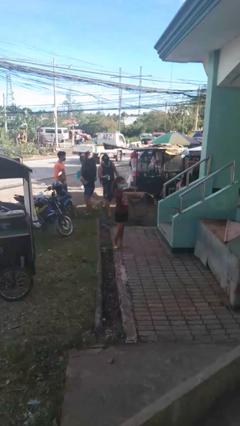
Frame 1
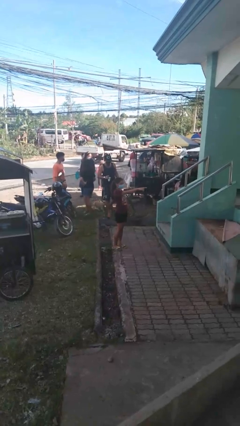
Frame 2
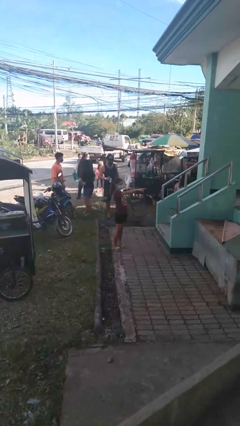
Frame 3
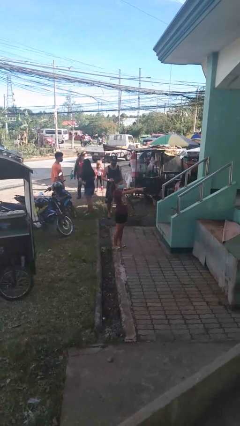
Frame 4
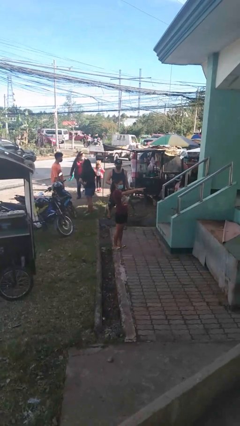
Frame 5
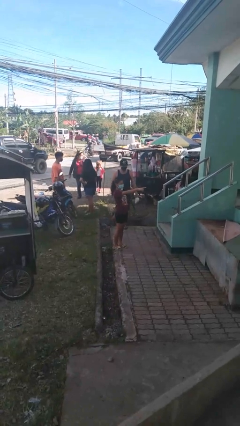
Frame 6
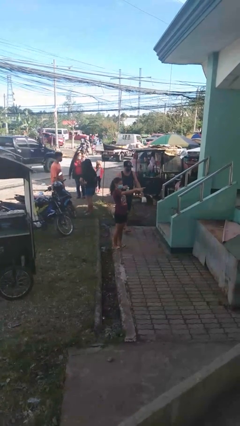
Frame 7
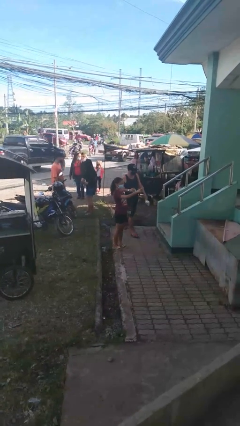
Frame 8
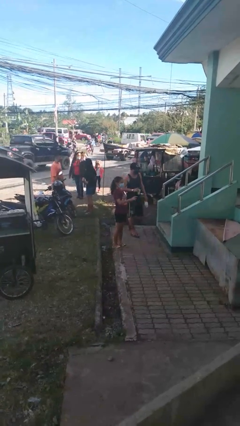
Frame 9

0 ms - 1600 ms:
person points at person

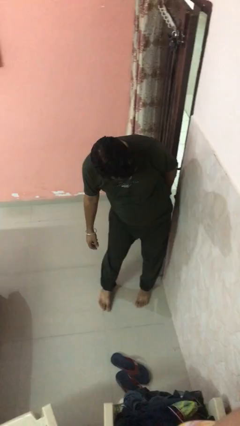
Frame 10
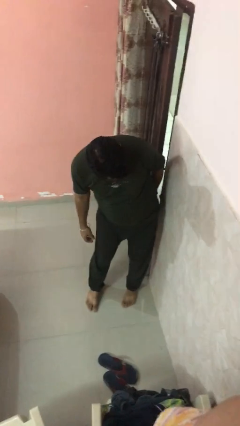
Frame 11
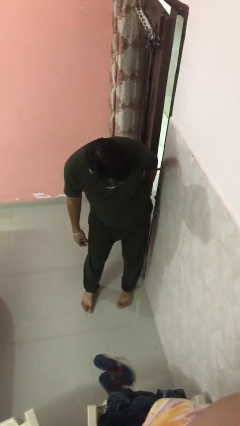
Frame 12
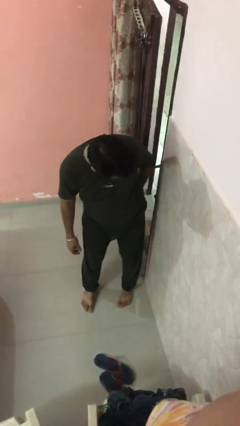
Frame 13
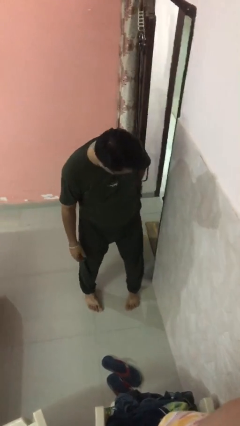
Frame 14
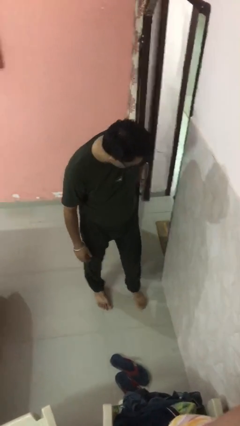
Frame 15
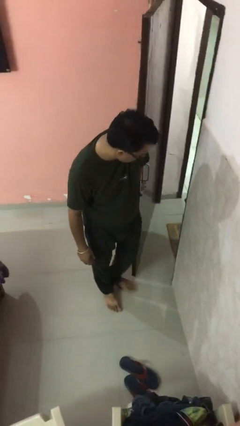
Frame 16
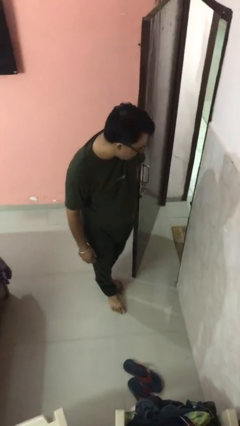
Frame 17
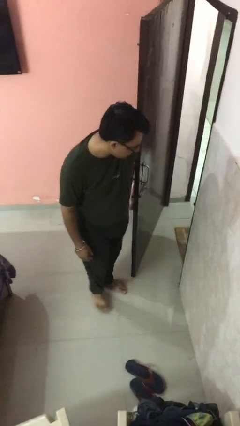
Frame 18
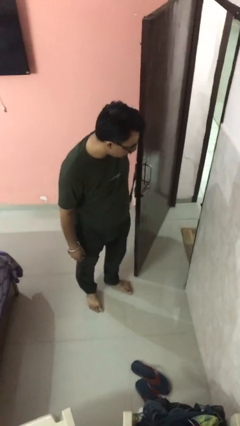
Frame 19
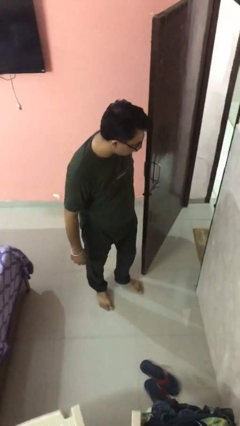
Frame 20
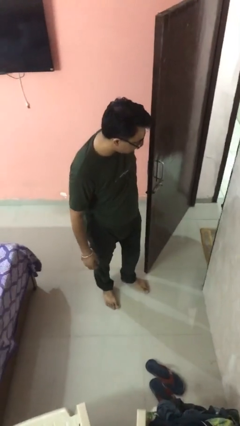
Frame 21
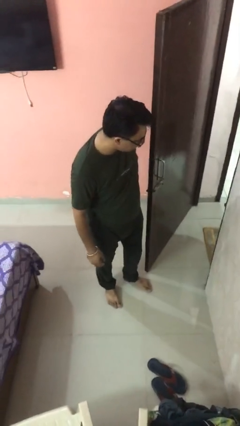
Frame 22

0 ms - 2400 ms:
person opens facility door

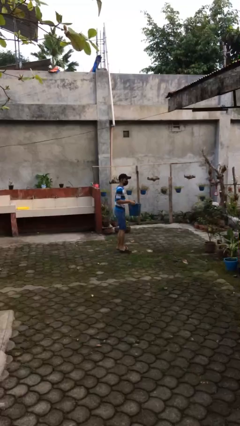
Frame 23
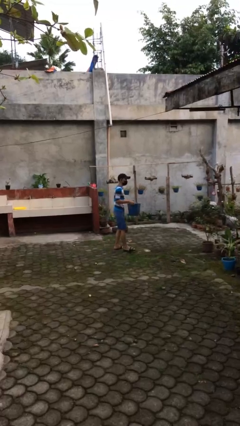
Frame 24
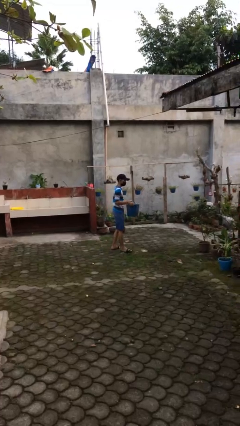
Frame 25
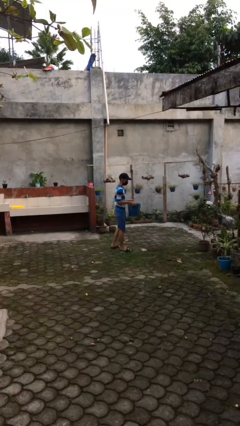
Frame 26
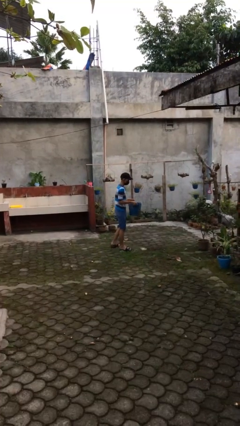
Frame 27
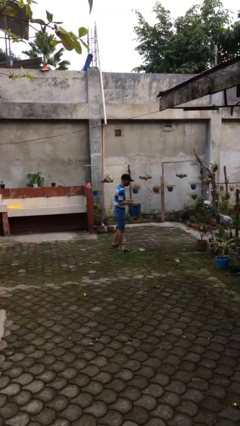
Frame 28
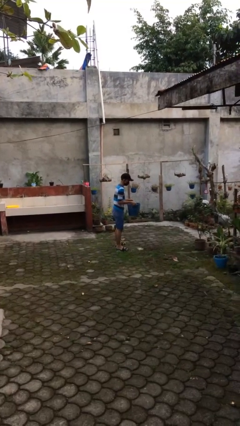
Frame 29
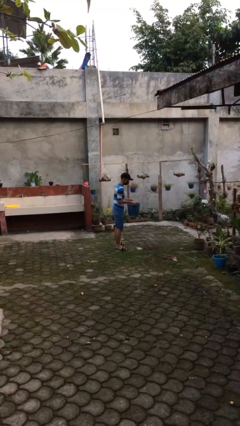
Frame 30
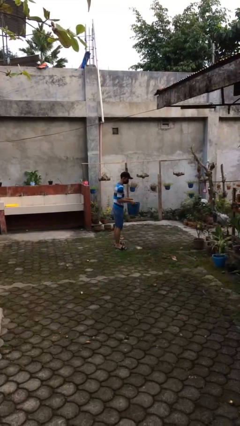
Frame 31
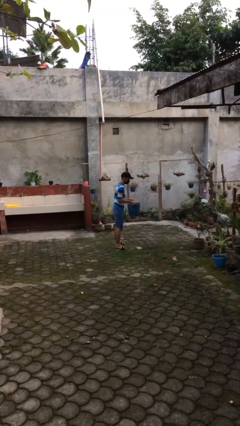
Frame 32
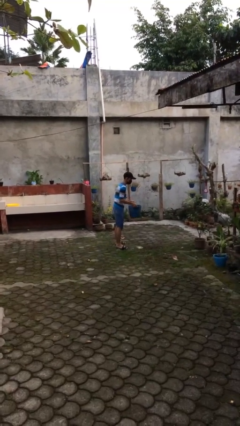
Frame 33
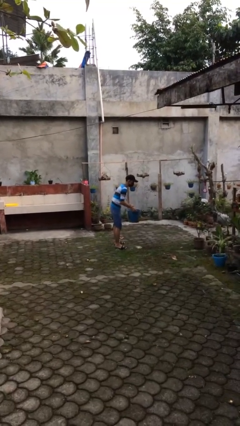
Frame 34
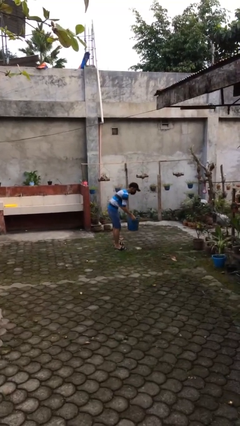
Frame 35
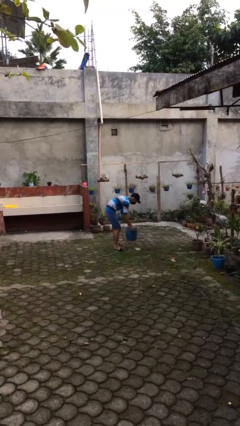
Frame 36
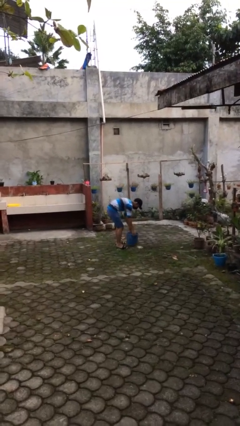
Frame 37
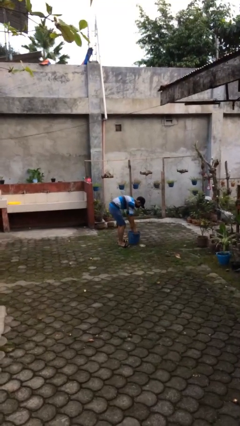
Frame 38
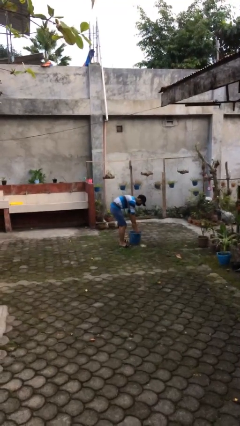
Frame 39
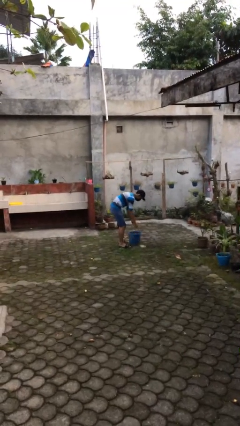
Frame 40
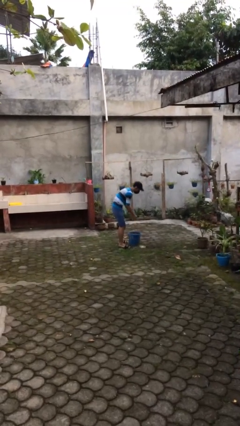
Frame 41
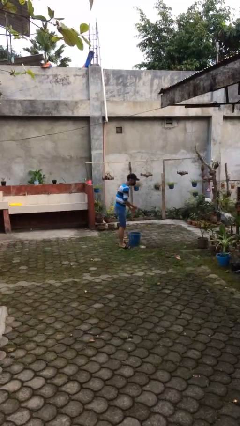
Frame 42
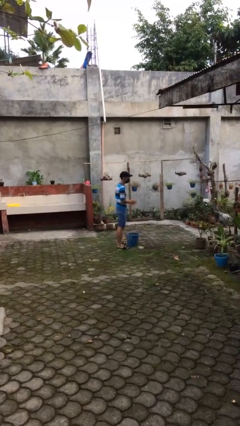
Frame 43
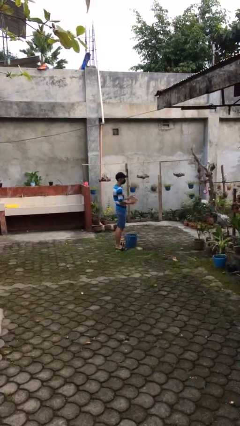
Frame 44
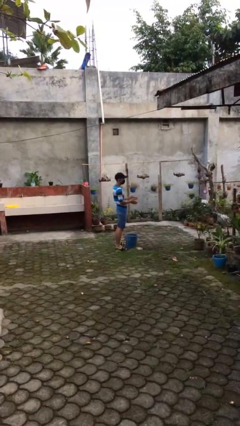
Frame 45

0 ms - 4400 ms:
person puts down object on floor

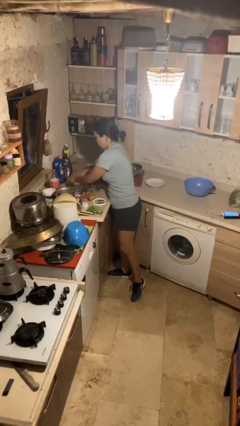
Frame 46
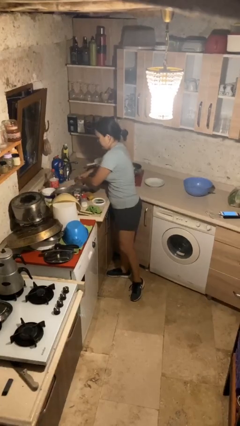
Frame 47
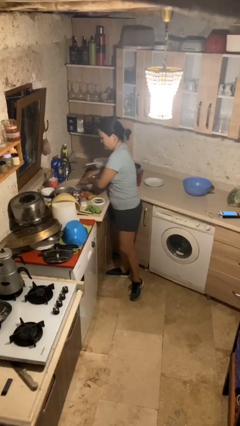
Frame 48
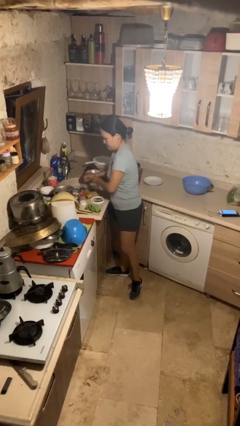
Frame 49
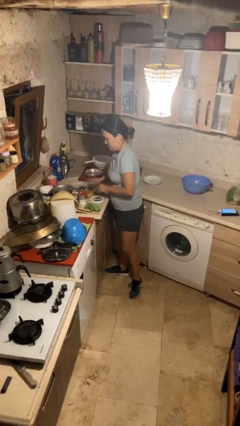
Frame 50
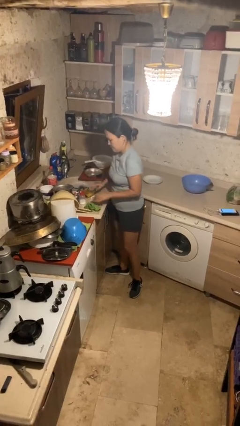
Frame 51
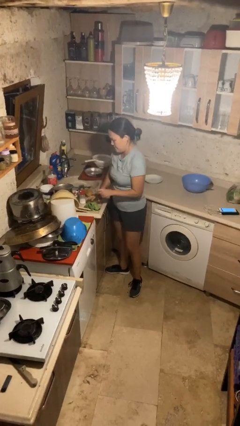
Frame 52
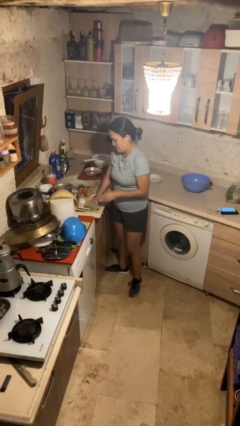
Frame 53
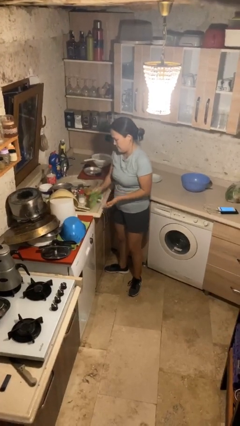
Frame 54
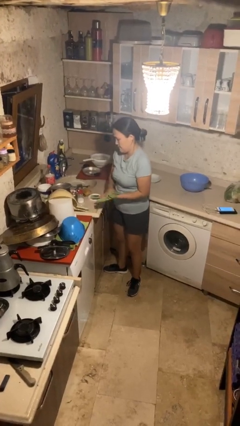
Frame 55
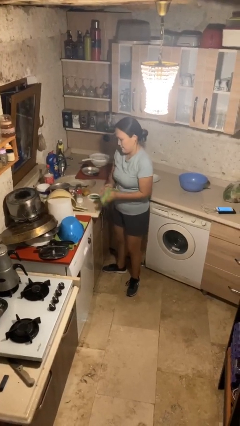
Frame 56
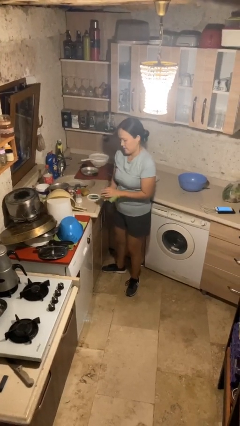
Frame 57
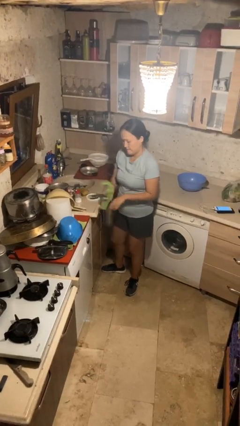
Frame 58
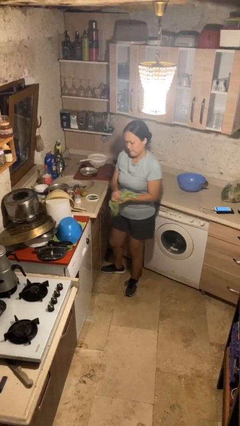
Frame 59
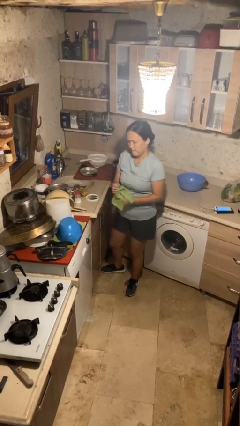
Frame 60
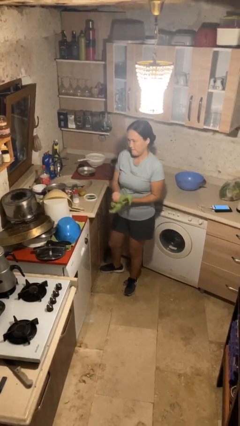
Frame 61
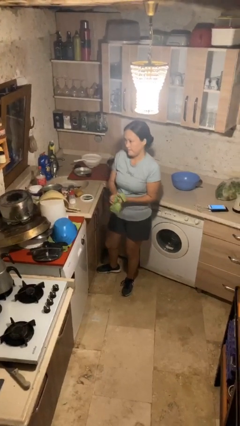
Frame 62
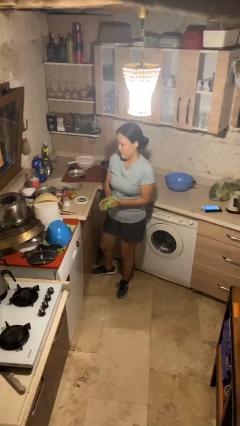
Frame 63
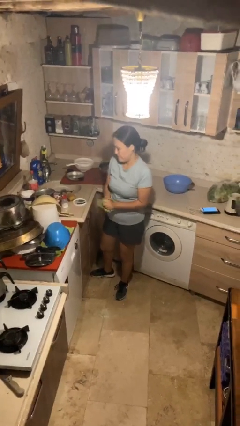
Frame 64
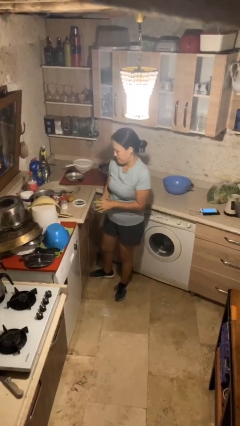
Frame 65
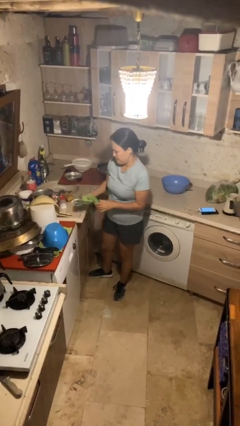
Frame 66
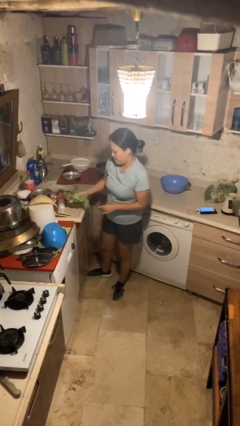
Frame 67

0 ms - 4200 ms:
person dries hands with towel

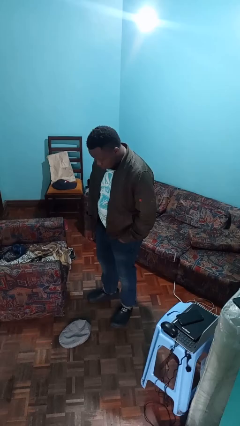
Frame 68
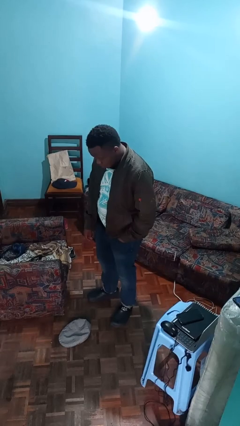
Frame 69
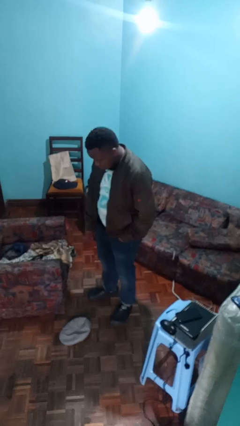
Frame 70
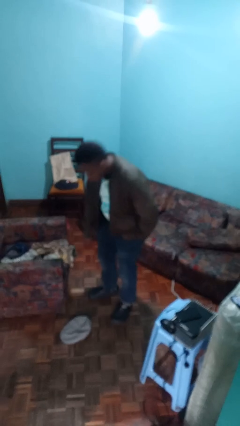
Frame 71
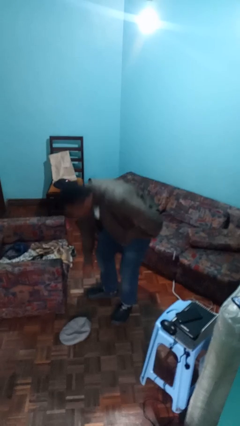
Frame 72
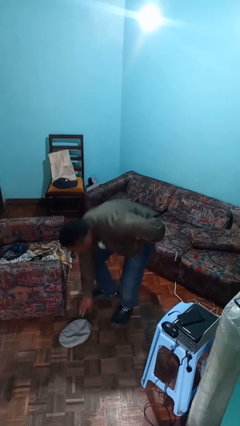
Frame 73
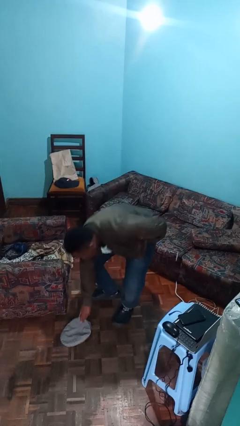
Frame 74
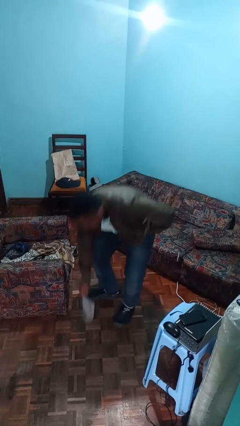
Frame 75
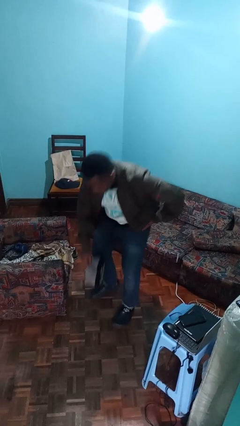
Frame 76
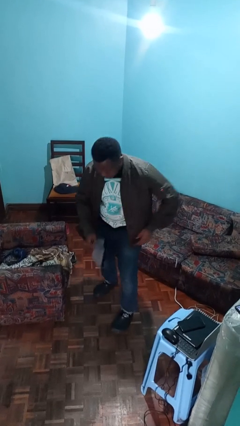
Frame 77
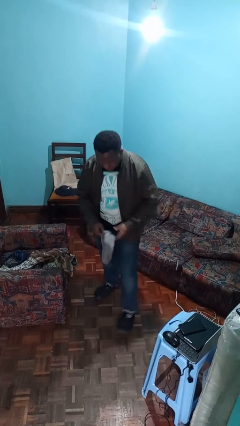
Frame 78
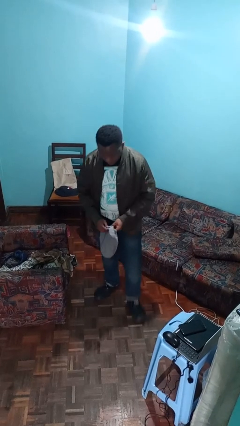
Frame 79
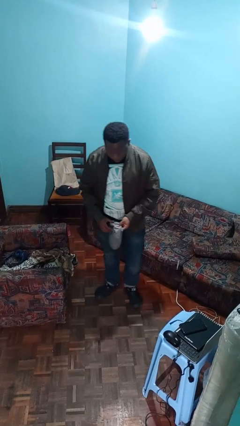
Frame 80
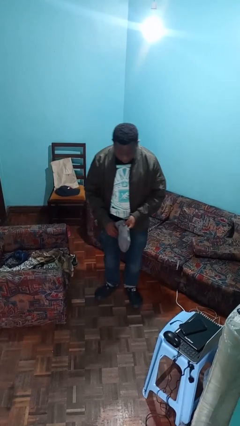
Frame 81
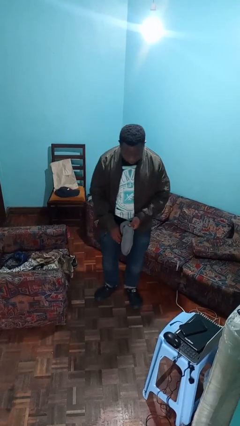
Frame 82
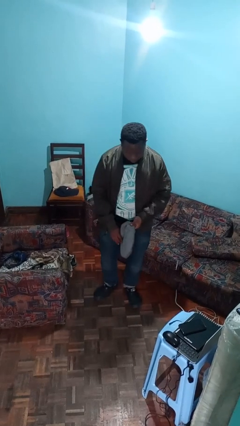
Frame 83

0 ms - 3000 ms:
person picks up object from floor

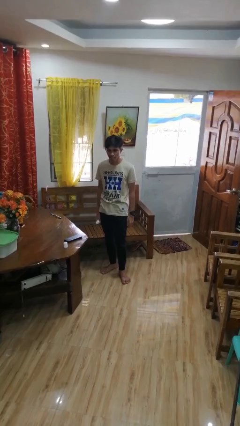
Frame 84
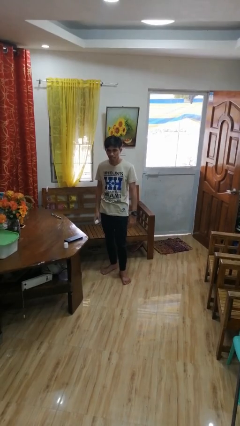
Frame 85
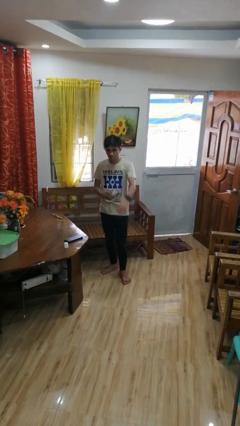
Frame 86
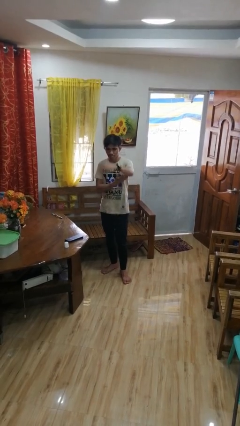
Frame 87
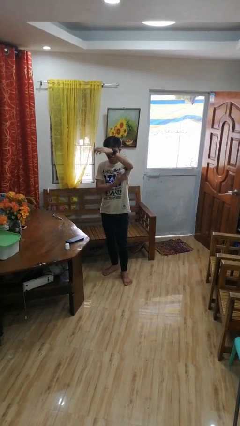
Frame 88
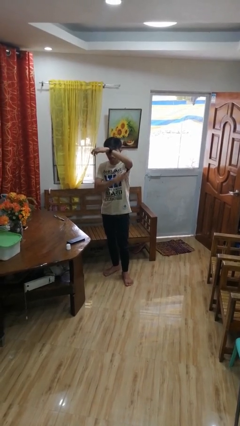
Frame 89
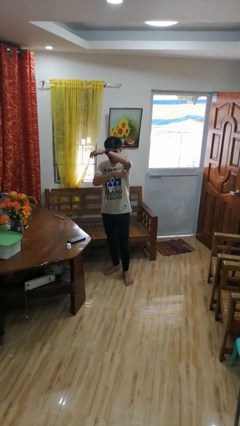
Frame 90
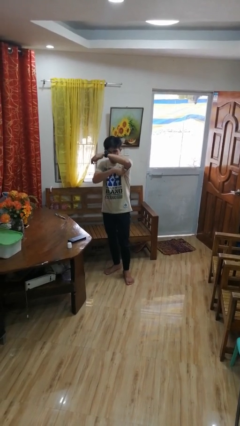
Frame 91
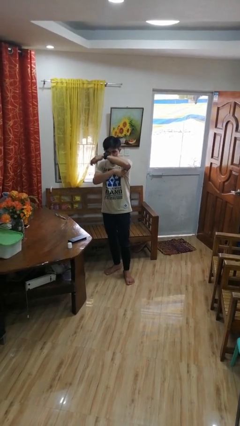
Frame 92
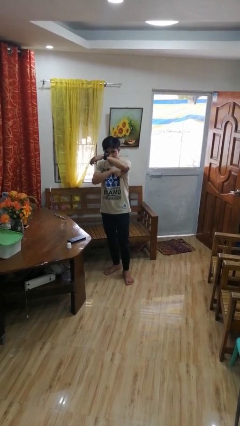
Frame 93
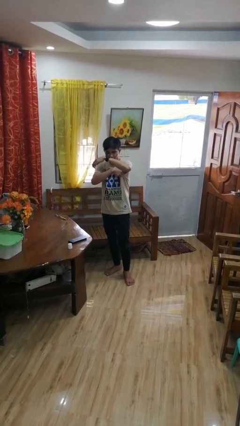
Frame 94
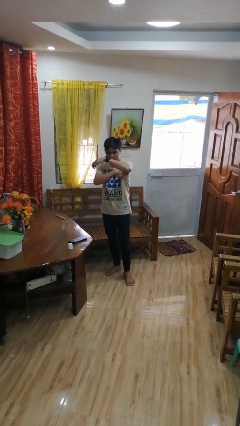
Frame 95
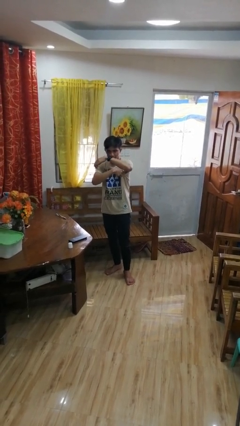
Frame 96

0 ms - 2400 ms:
person applies deodorant
